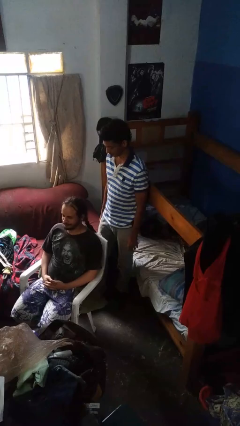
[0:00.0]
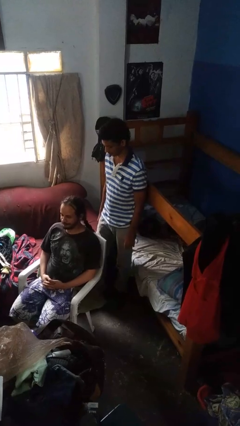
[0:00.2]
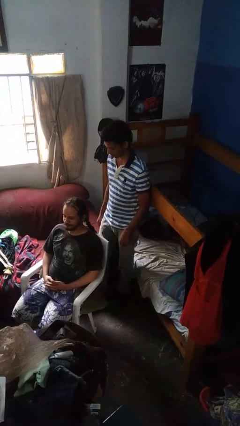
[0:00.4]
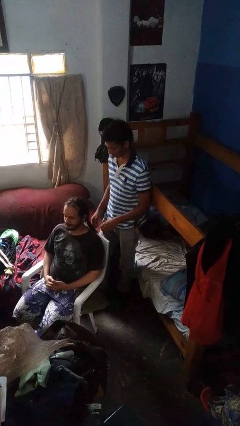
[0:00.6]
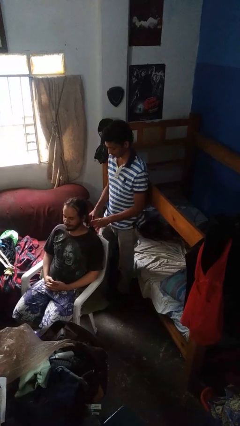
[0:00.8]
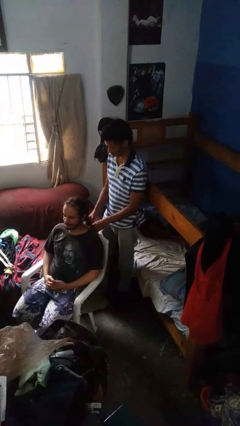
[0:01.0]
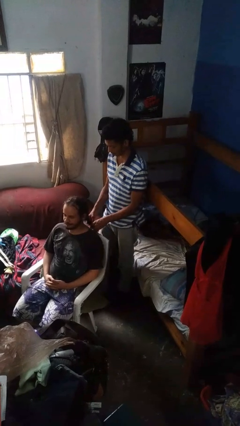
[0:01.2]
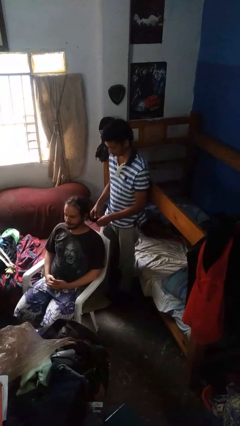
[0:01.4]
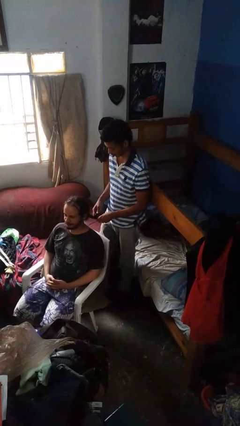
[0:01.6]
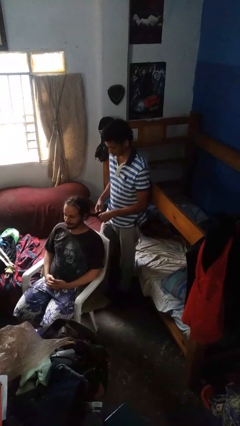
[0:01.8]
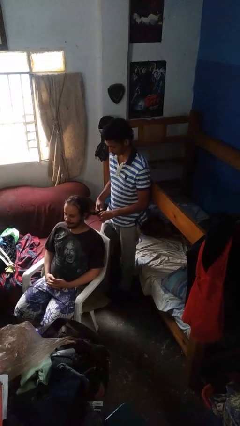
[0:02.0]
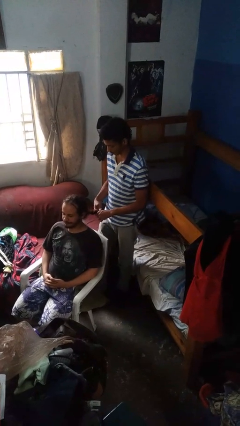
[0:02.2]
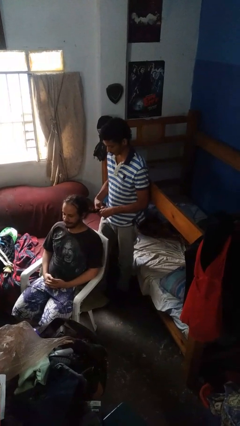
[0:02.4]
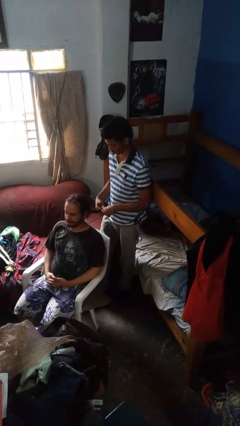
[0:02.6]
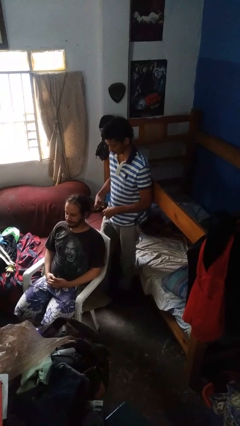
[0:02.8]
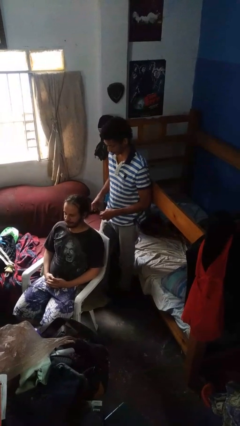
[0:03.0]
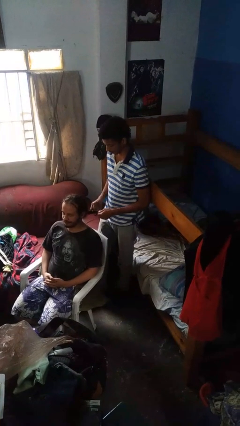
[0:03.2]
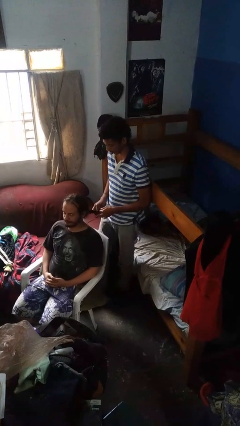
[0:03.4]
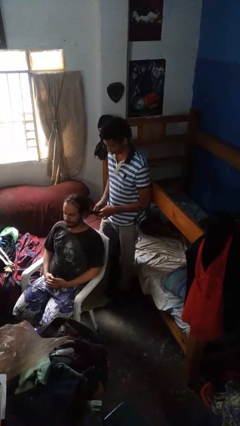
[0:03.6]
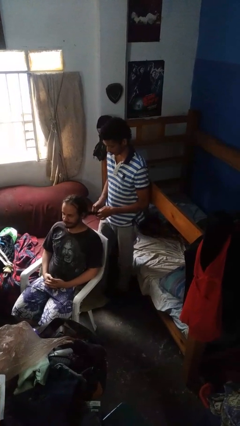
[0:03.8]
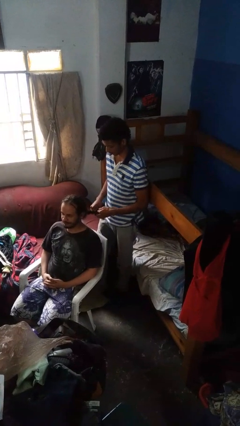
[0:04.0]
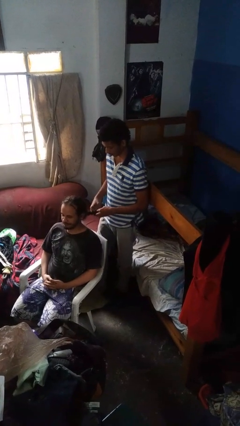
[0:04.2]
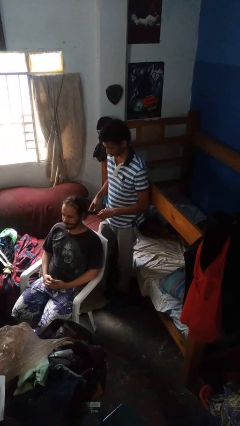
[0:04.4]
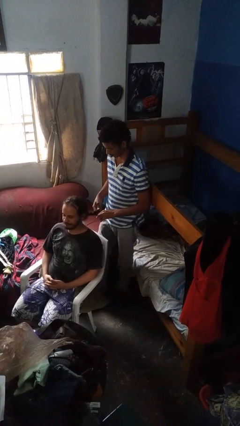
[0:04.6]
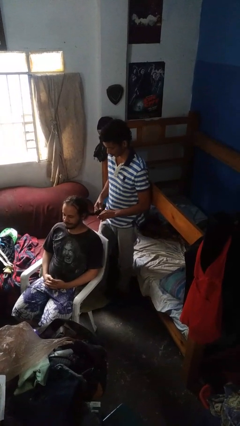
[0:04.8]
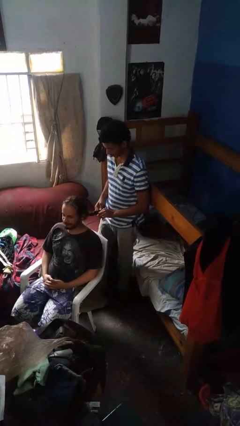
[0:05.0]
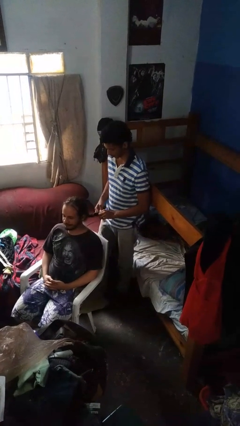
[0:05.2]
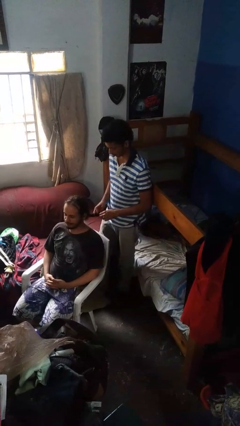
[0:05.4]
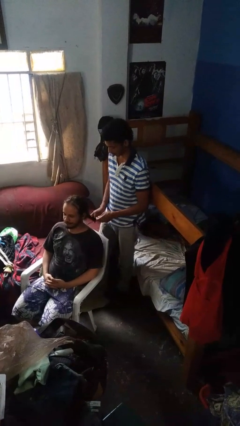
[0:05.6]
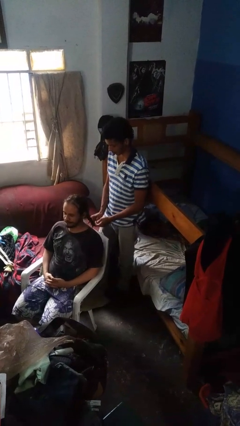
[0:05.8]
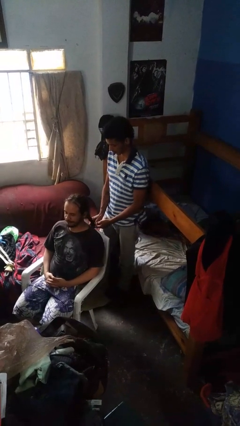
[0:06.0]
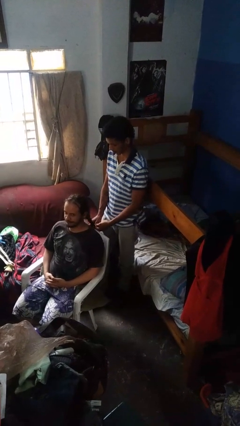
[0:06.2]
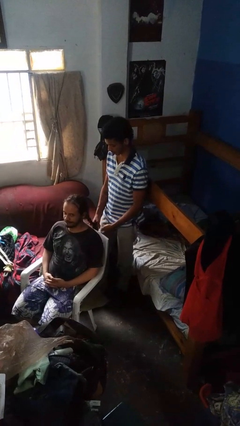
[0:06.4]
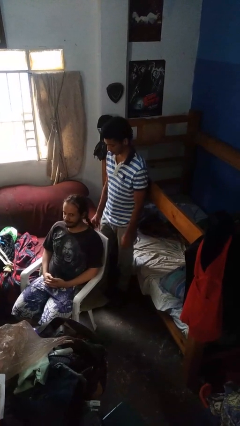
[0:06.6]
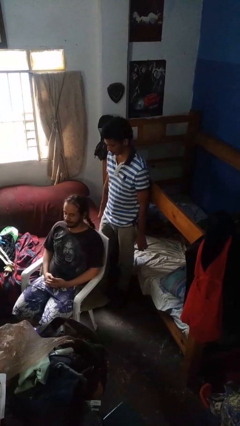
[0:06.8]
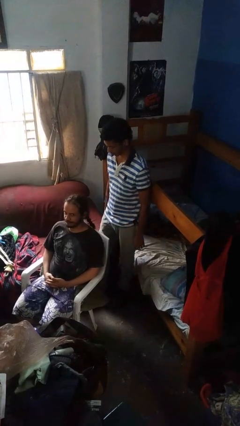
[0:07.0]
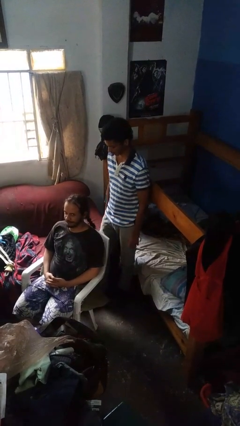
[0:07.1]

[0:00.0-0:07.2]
person braids hair of person

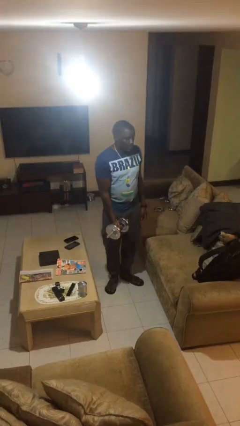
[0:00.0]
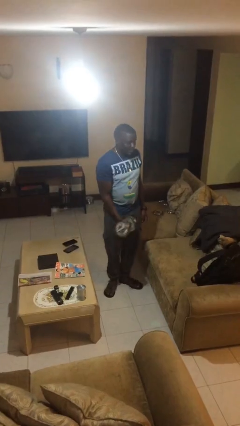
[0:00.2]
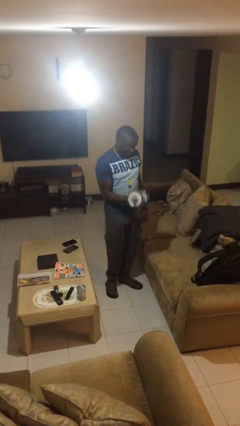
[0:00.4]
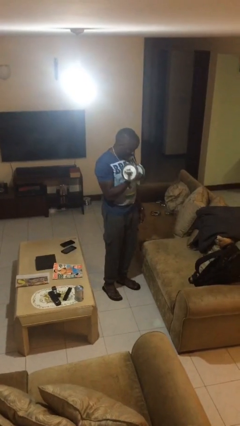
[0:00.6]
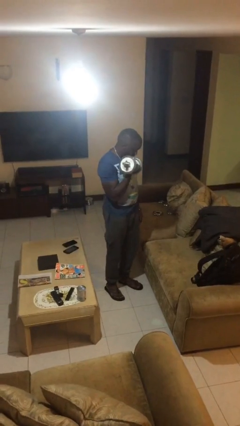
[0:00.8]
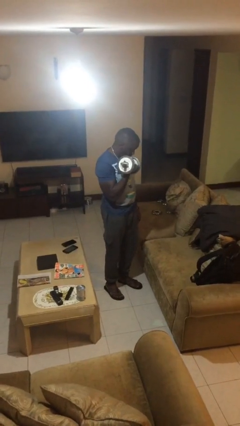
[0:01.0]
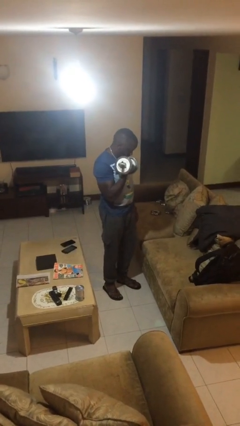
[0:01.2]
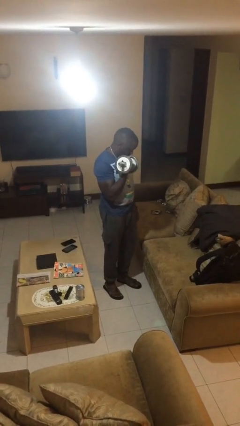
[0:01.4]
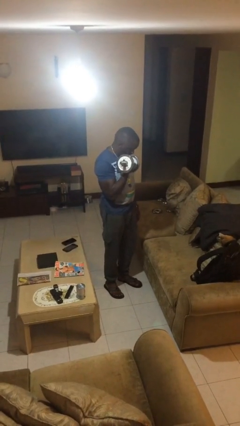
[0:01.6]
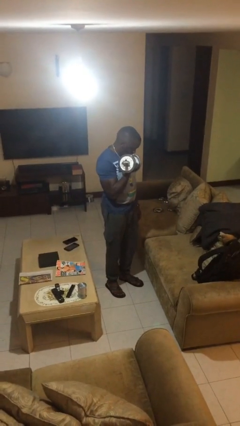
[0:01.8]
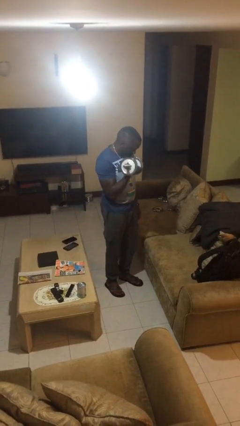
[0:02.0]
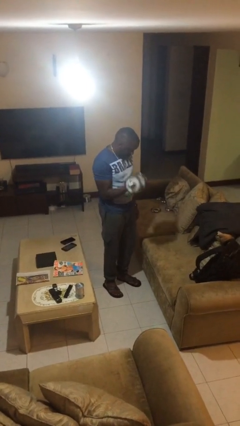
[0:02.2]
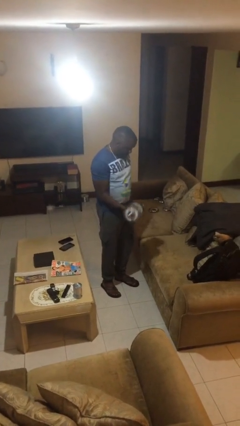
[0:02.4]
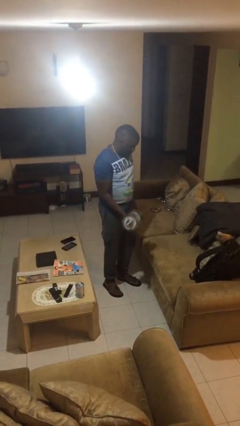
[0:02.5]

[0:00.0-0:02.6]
person lifts dumbbells

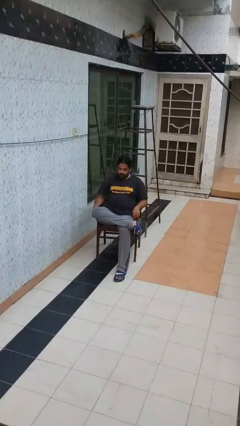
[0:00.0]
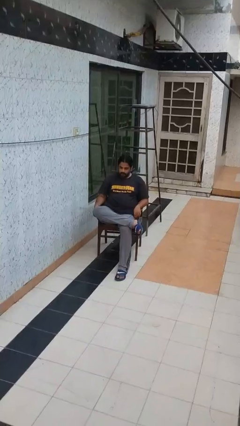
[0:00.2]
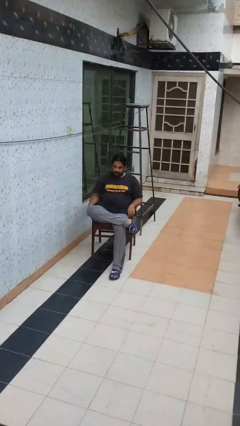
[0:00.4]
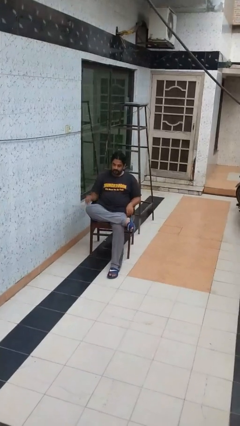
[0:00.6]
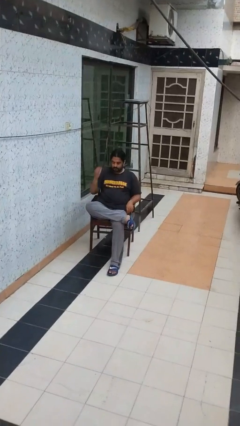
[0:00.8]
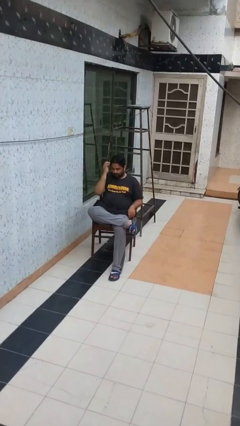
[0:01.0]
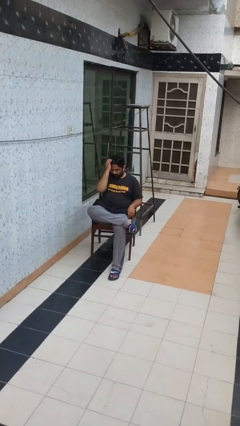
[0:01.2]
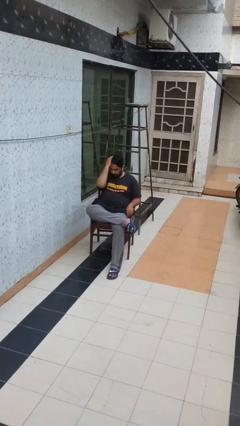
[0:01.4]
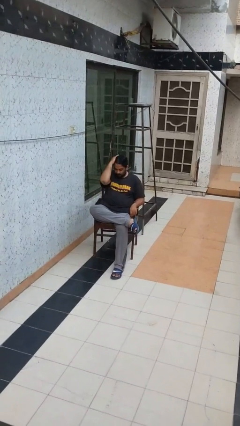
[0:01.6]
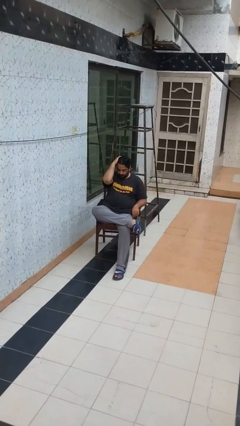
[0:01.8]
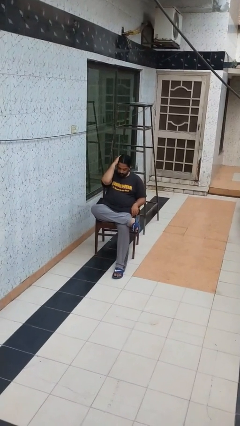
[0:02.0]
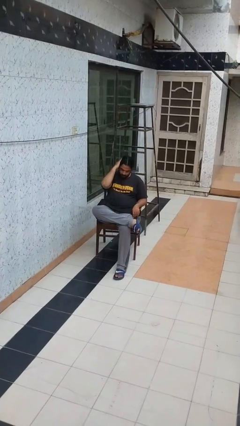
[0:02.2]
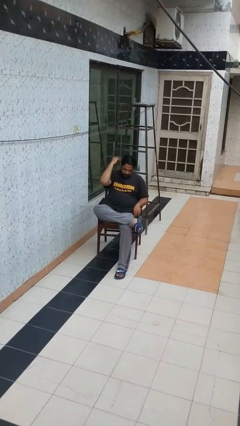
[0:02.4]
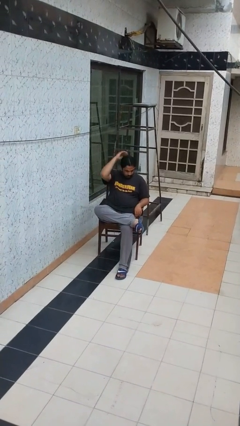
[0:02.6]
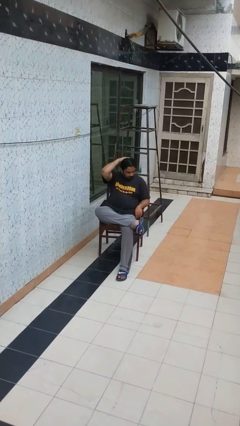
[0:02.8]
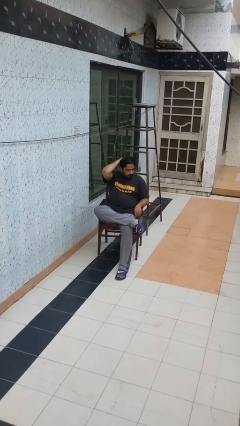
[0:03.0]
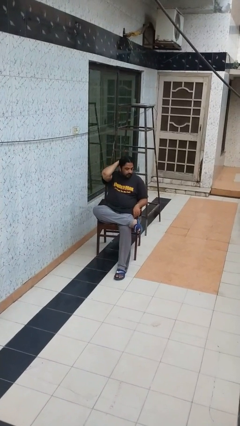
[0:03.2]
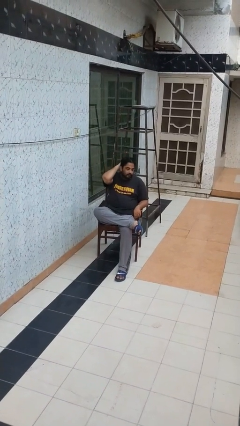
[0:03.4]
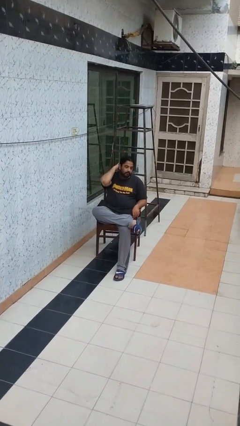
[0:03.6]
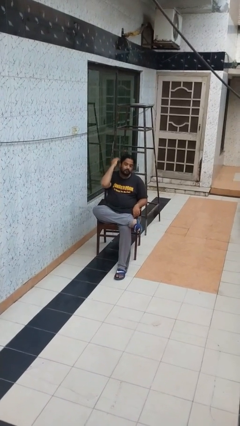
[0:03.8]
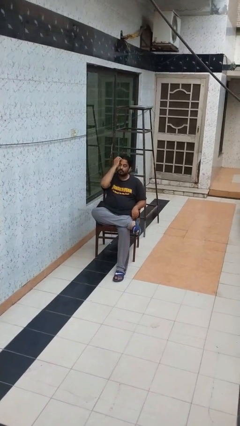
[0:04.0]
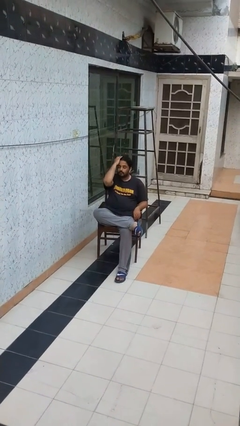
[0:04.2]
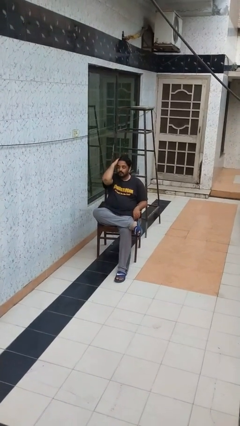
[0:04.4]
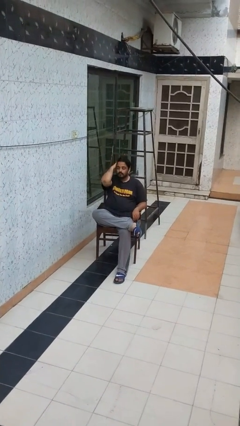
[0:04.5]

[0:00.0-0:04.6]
person strokes hair

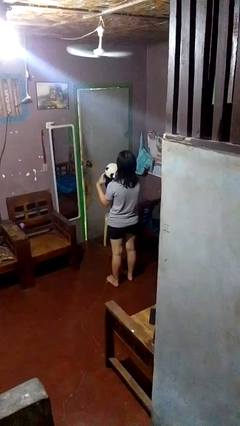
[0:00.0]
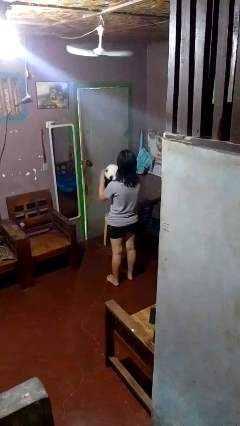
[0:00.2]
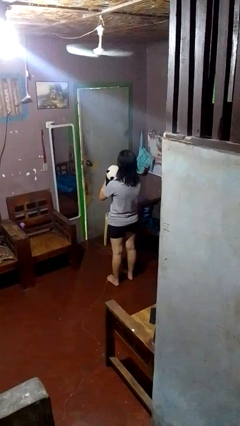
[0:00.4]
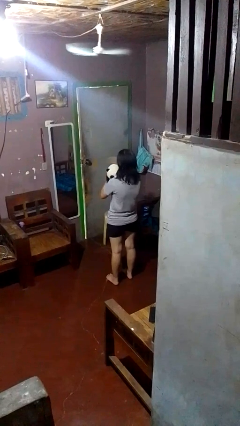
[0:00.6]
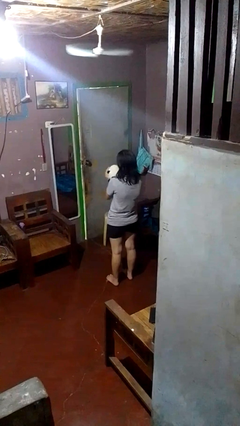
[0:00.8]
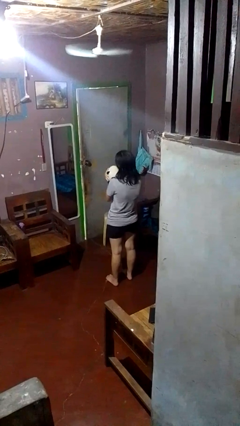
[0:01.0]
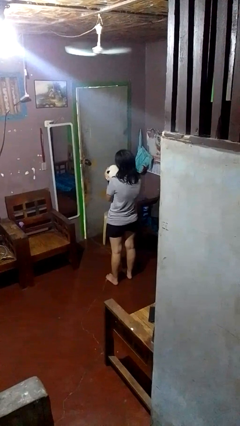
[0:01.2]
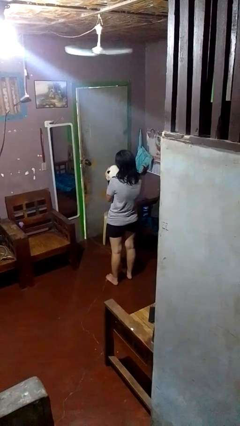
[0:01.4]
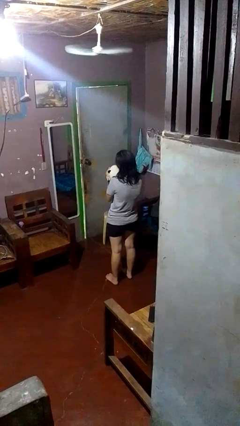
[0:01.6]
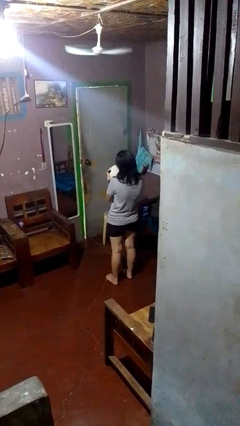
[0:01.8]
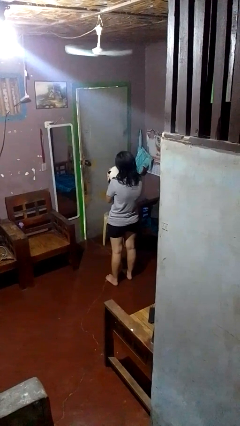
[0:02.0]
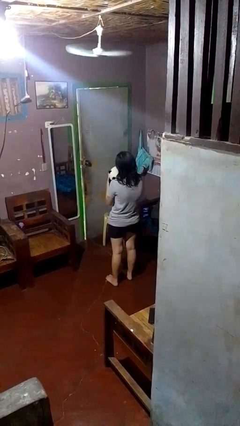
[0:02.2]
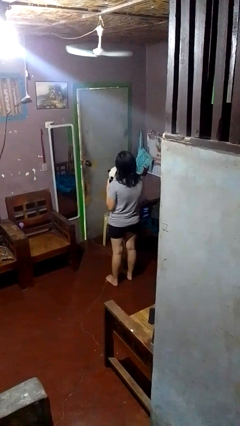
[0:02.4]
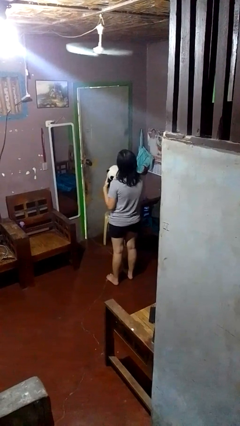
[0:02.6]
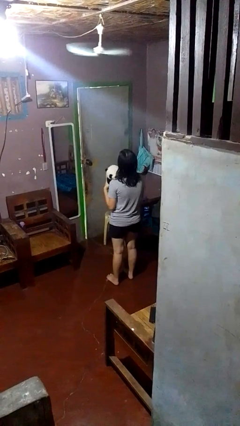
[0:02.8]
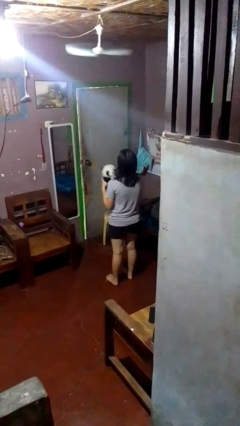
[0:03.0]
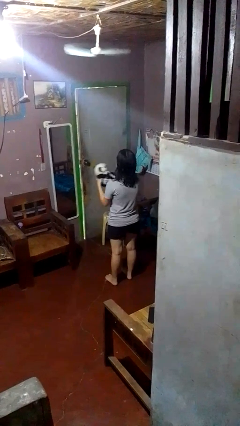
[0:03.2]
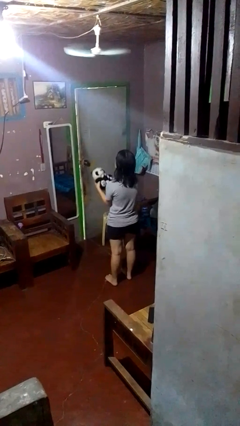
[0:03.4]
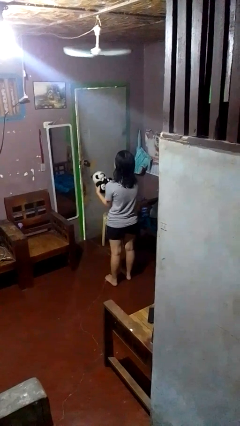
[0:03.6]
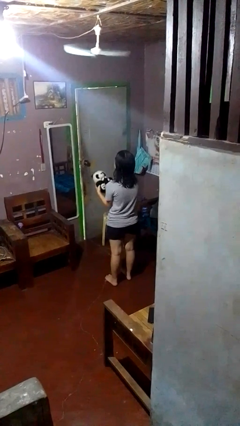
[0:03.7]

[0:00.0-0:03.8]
person hugs stuffed animal
